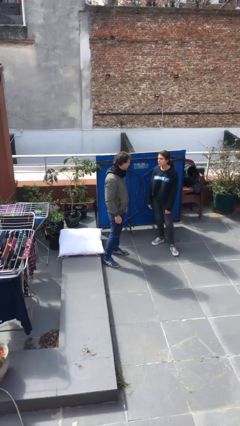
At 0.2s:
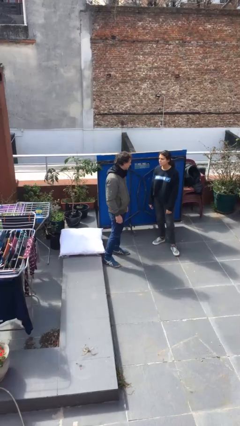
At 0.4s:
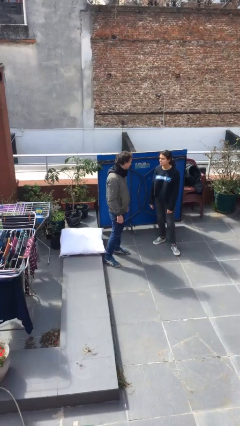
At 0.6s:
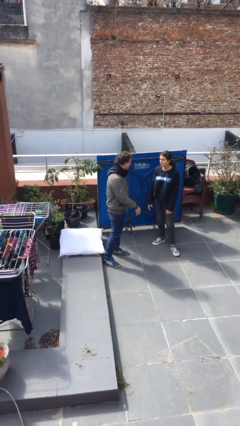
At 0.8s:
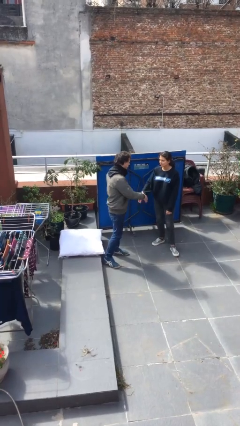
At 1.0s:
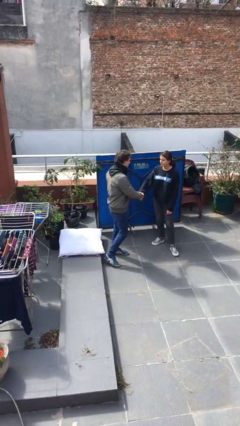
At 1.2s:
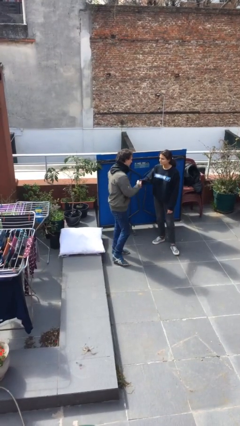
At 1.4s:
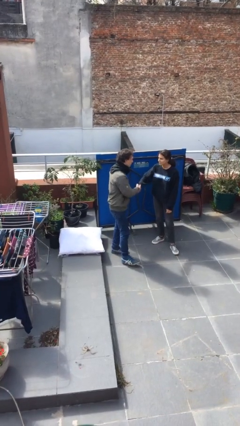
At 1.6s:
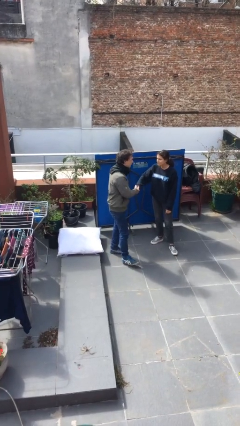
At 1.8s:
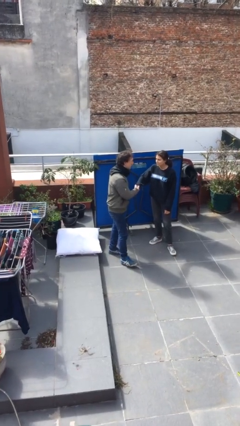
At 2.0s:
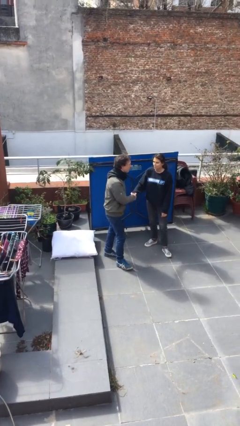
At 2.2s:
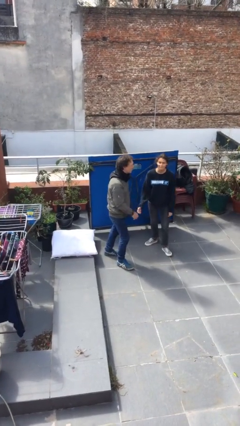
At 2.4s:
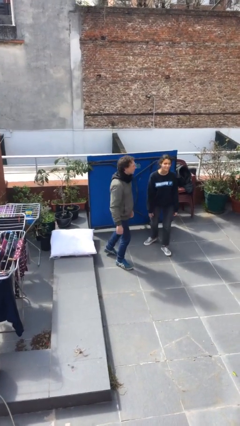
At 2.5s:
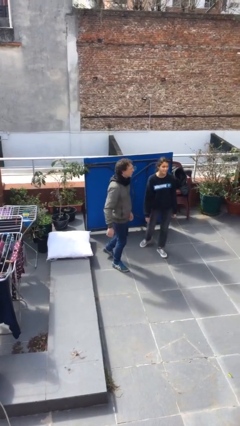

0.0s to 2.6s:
person shakes hand

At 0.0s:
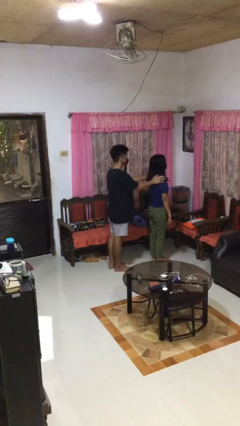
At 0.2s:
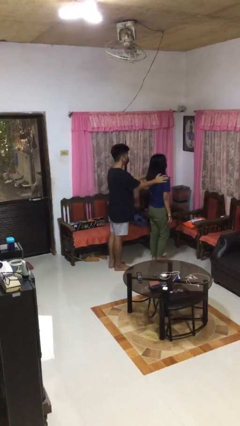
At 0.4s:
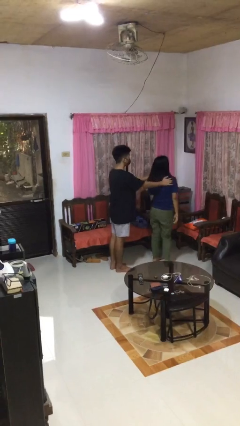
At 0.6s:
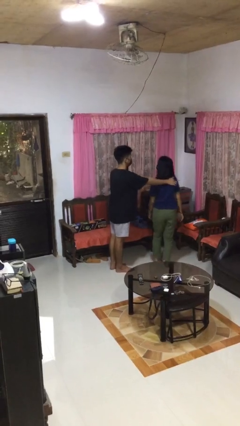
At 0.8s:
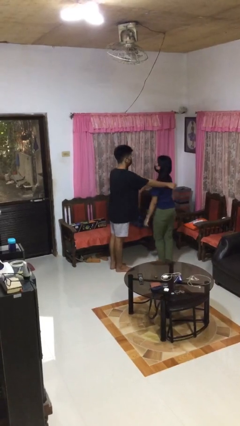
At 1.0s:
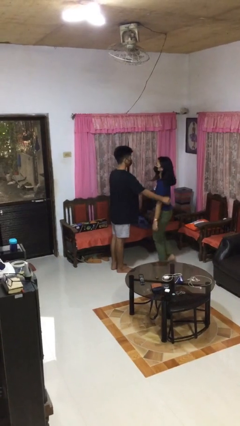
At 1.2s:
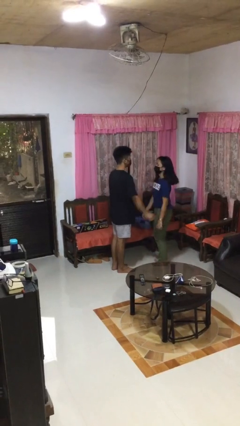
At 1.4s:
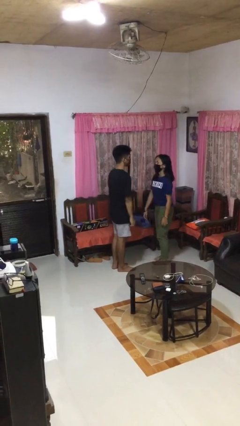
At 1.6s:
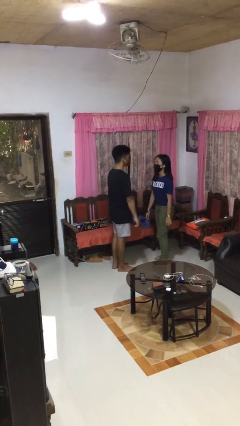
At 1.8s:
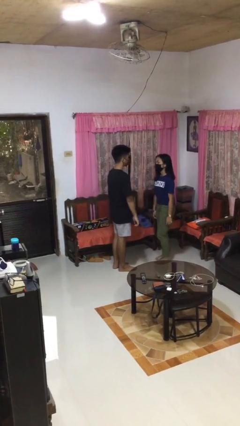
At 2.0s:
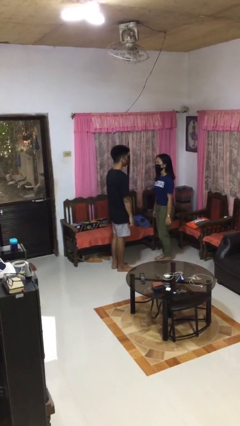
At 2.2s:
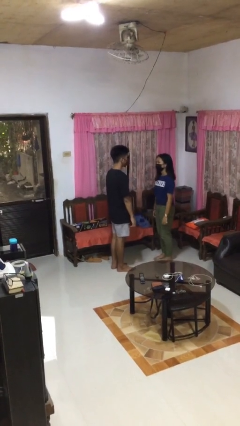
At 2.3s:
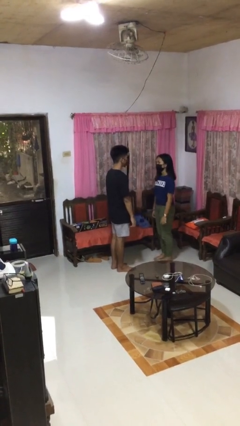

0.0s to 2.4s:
person spins person around

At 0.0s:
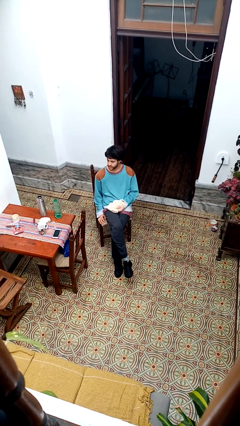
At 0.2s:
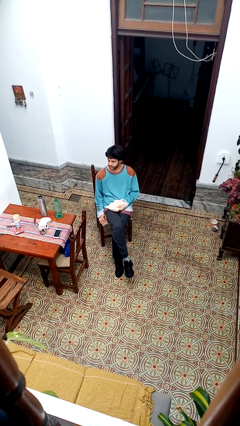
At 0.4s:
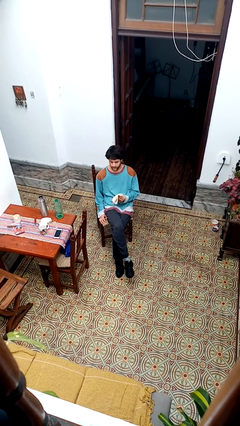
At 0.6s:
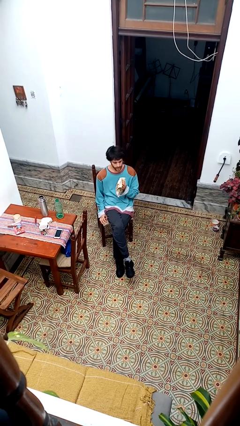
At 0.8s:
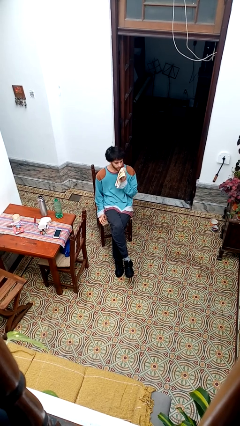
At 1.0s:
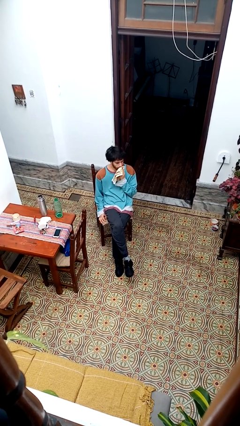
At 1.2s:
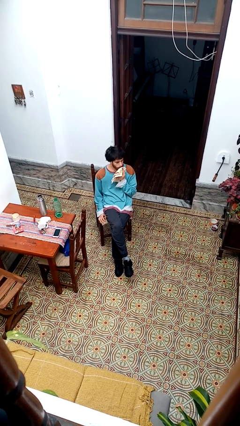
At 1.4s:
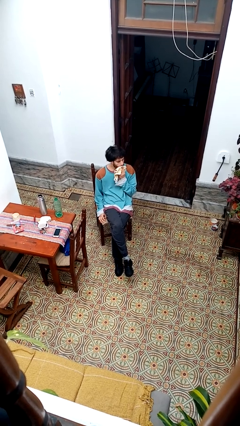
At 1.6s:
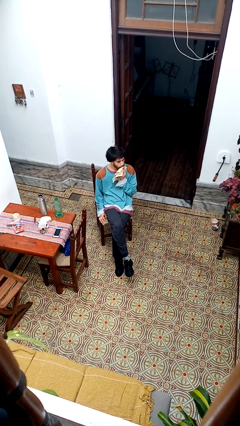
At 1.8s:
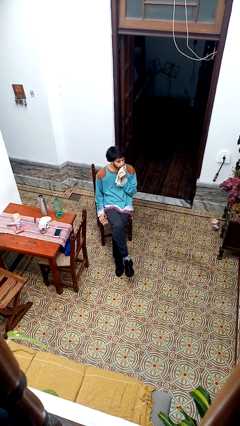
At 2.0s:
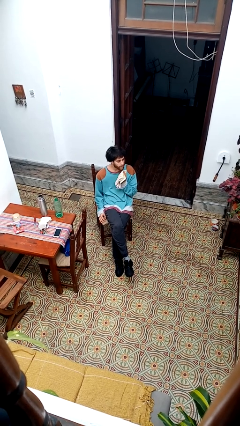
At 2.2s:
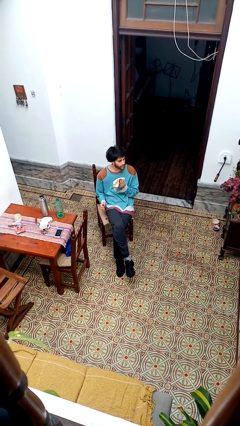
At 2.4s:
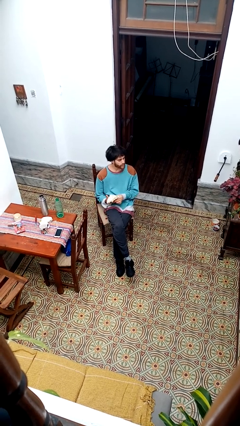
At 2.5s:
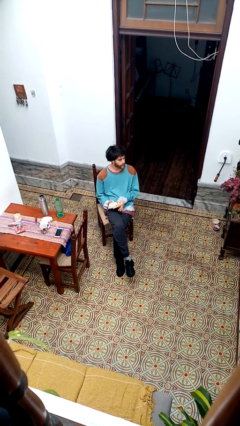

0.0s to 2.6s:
person wipes mouth with napkin

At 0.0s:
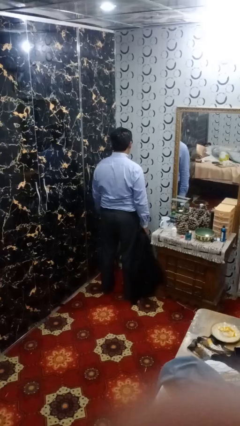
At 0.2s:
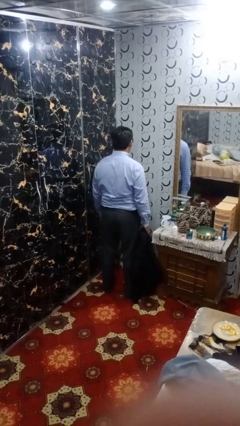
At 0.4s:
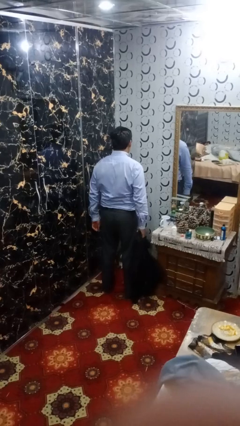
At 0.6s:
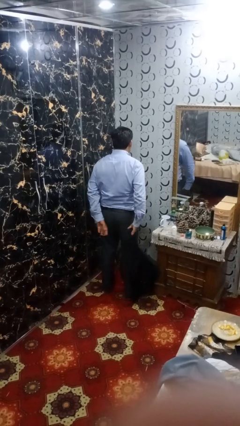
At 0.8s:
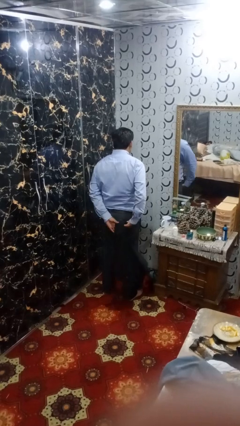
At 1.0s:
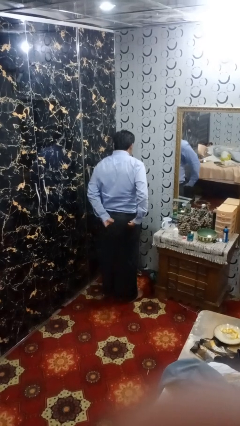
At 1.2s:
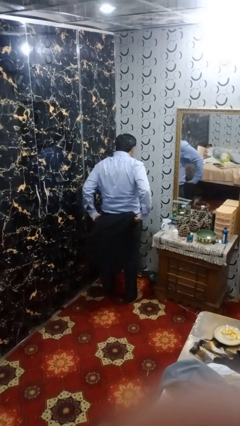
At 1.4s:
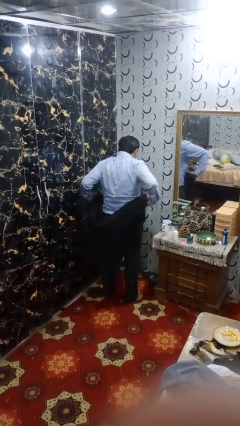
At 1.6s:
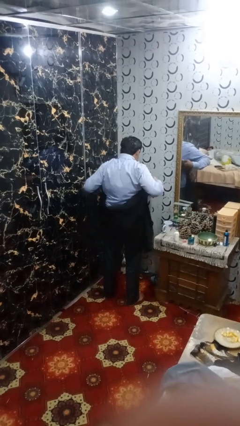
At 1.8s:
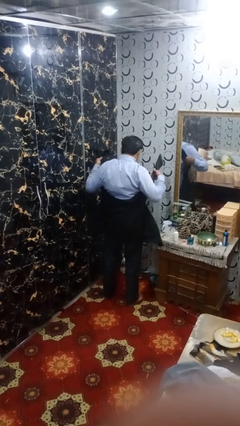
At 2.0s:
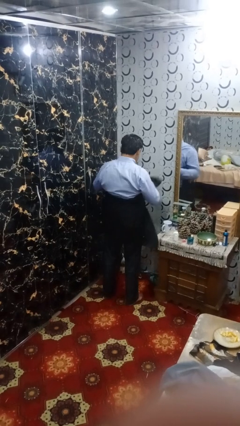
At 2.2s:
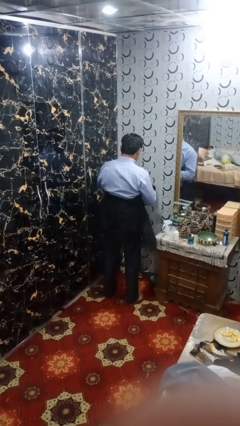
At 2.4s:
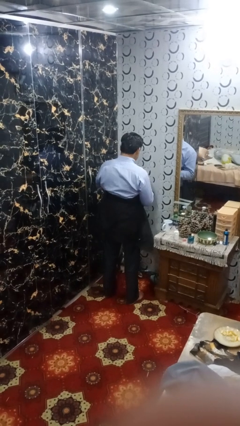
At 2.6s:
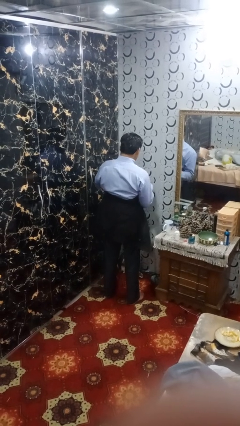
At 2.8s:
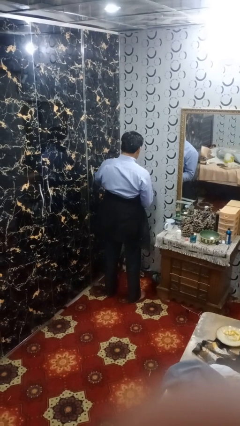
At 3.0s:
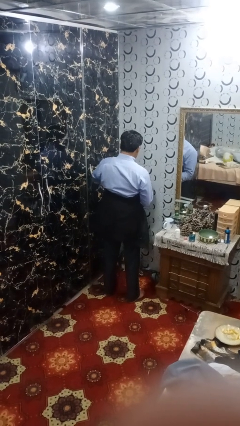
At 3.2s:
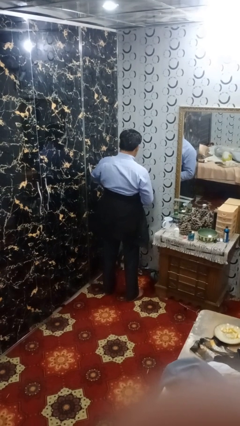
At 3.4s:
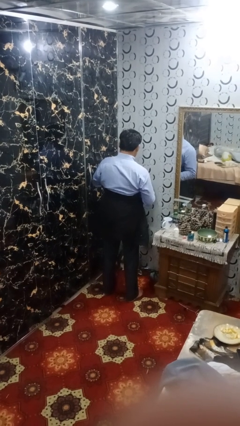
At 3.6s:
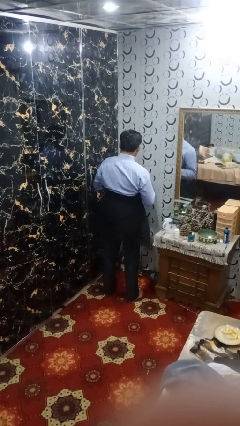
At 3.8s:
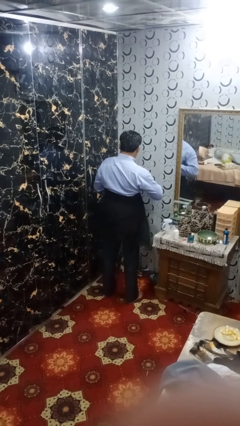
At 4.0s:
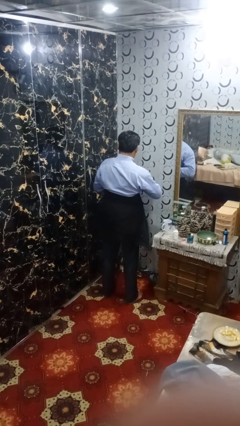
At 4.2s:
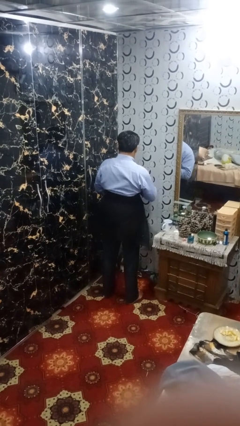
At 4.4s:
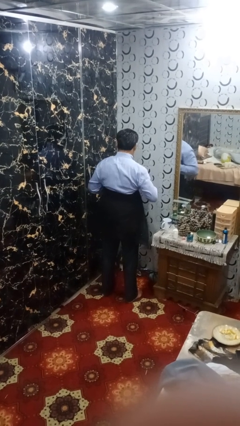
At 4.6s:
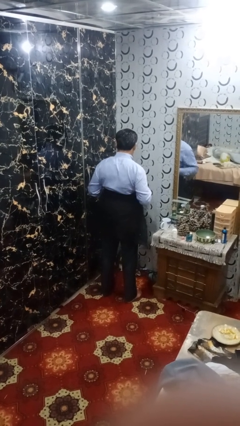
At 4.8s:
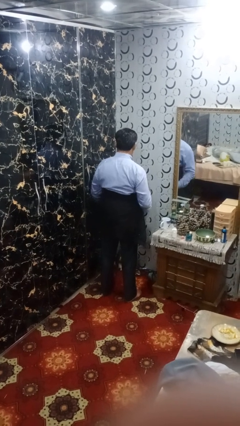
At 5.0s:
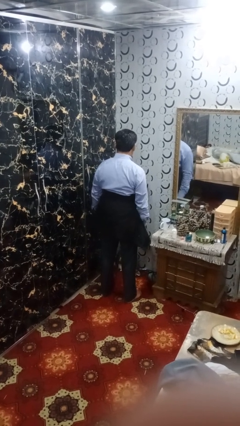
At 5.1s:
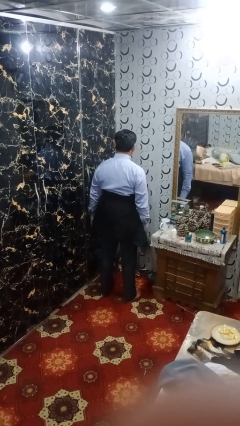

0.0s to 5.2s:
person ties jacket around waist

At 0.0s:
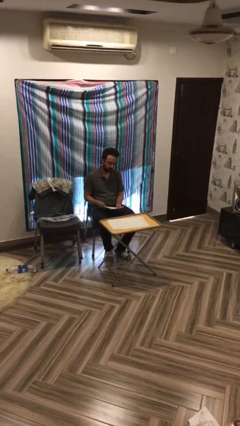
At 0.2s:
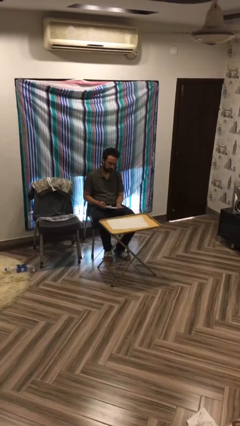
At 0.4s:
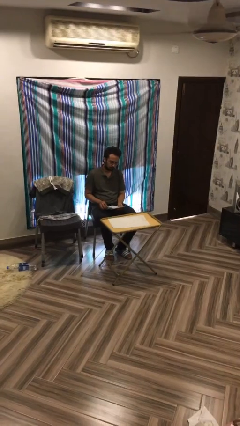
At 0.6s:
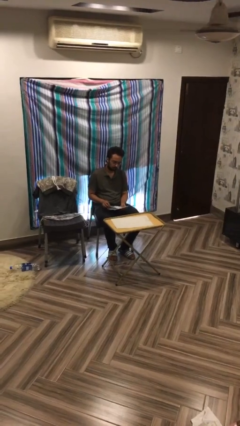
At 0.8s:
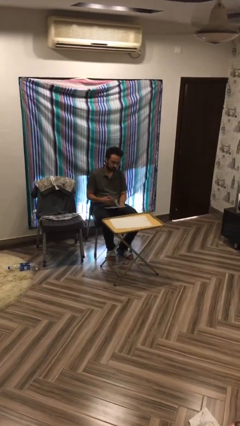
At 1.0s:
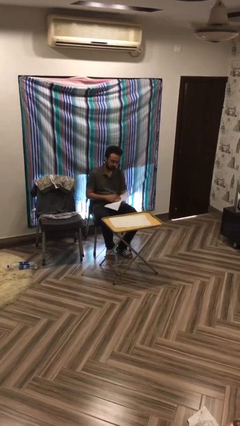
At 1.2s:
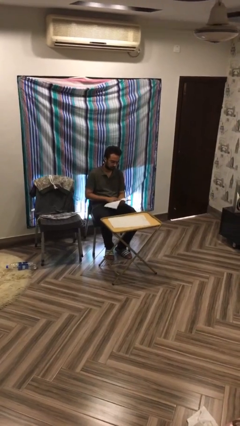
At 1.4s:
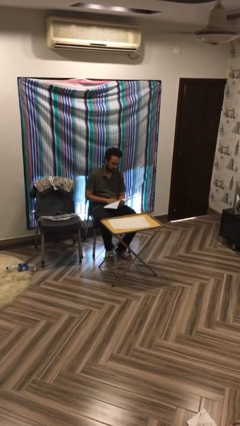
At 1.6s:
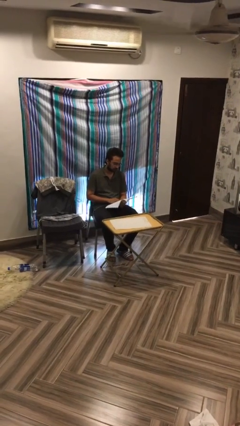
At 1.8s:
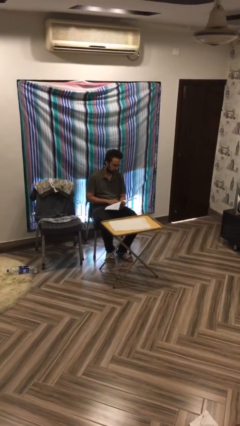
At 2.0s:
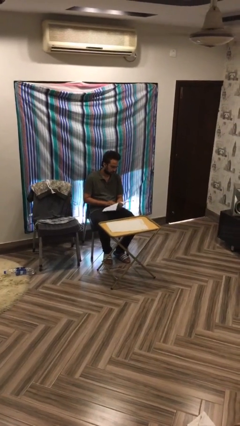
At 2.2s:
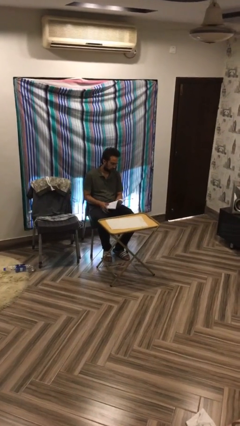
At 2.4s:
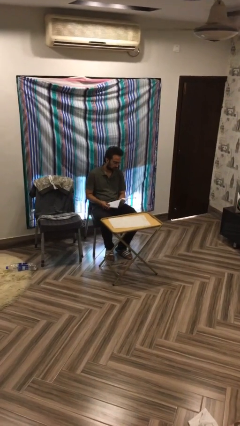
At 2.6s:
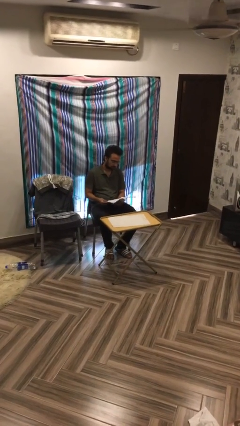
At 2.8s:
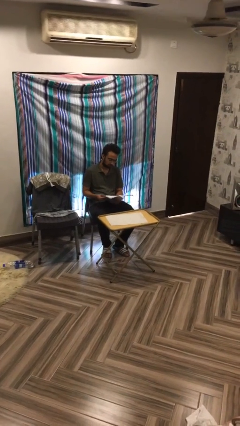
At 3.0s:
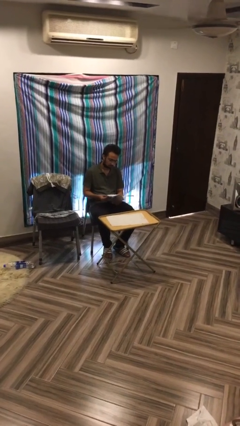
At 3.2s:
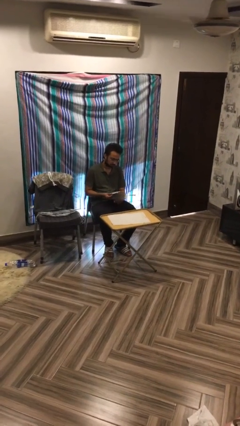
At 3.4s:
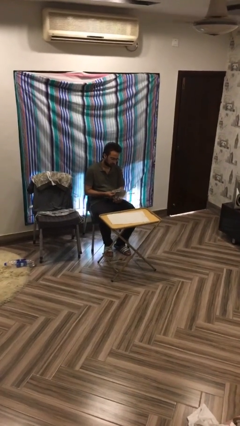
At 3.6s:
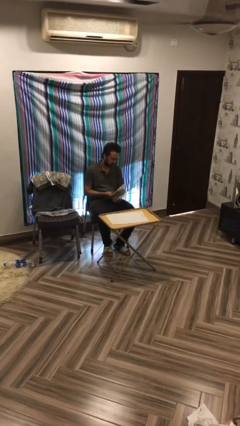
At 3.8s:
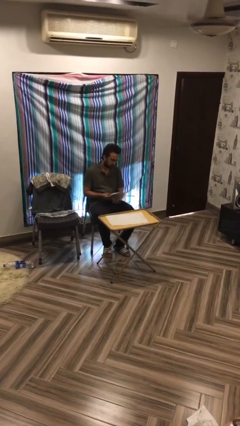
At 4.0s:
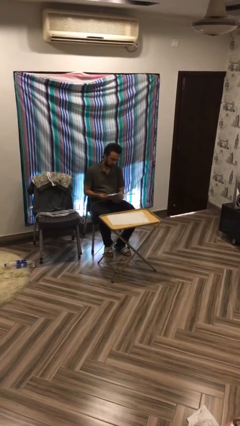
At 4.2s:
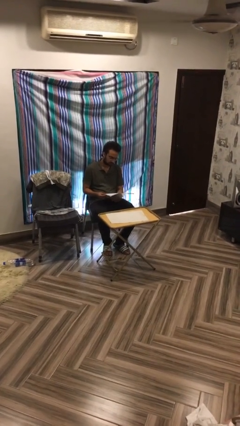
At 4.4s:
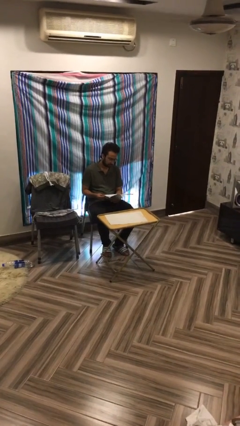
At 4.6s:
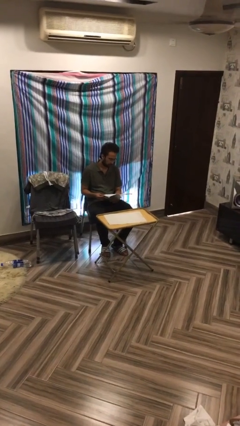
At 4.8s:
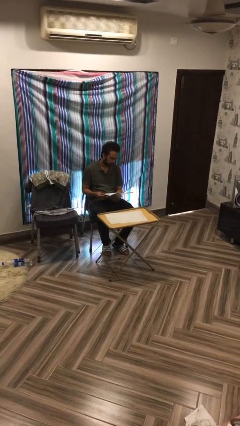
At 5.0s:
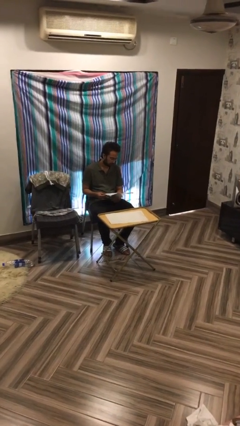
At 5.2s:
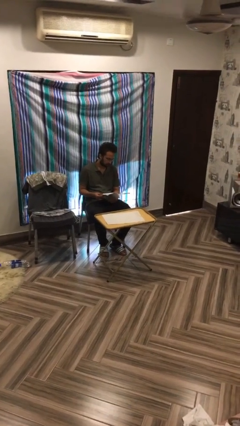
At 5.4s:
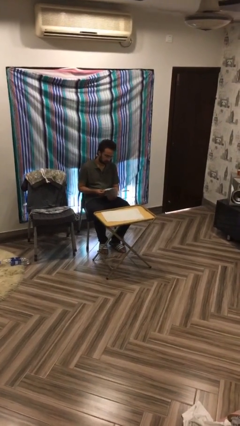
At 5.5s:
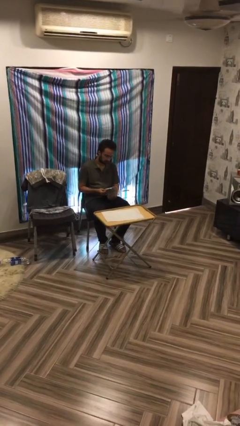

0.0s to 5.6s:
person reads document
